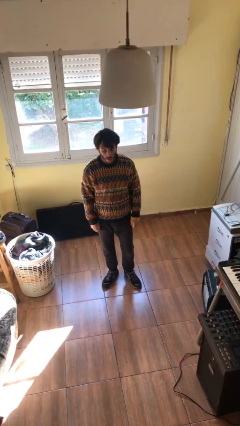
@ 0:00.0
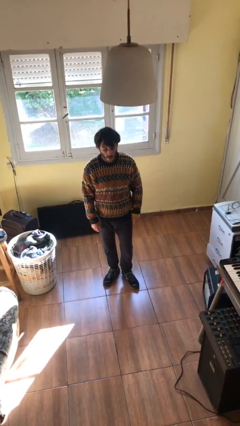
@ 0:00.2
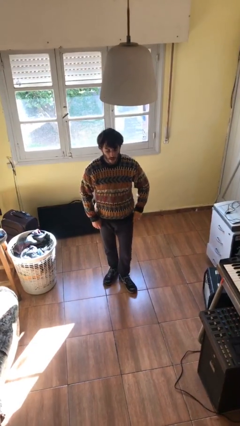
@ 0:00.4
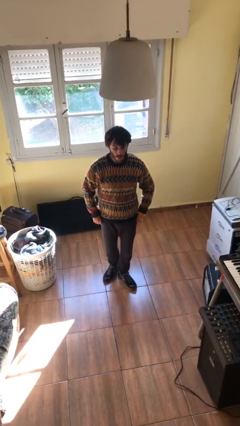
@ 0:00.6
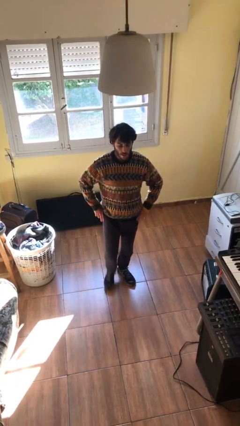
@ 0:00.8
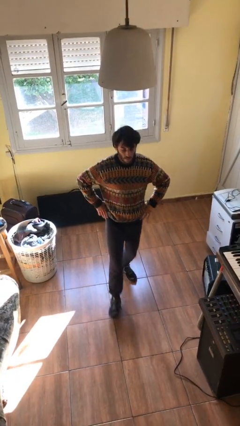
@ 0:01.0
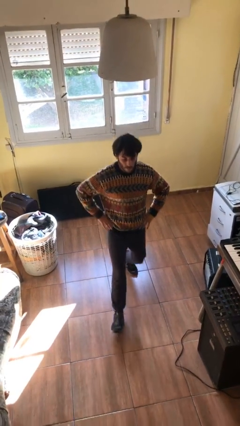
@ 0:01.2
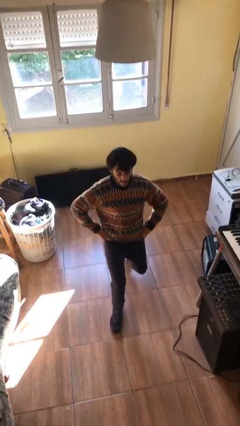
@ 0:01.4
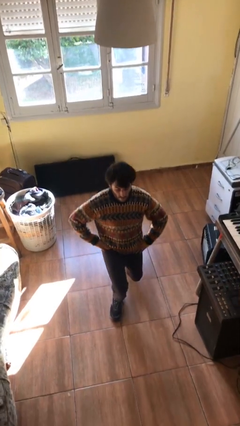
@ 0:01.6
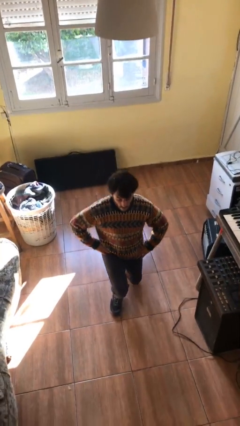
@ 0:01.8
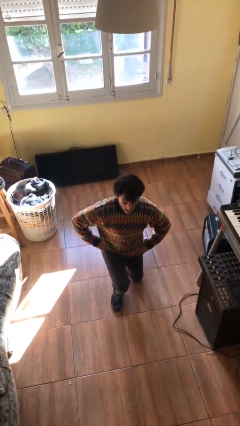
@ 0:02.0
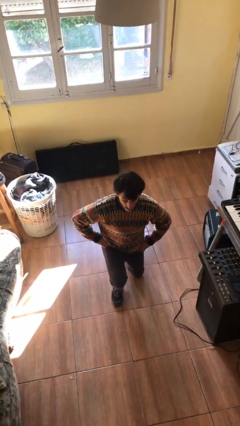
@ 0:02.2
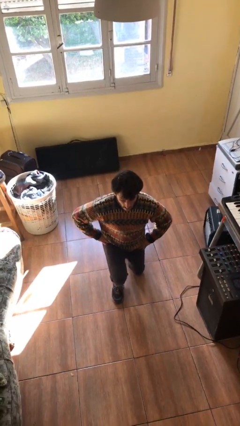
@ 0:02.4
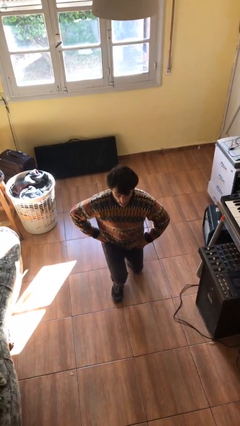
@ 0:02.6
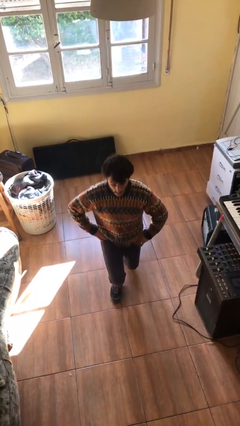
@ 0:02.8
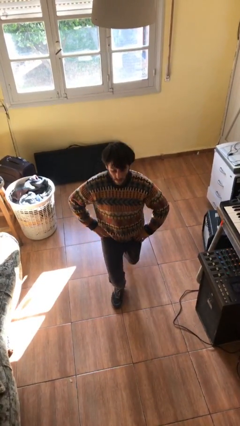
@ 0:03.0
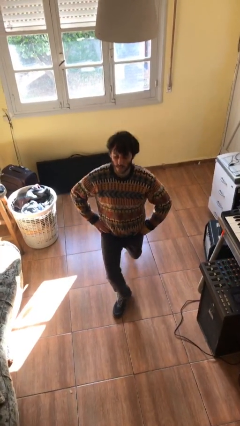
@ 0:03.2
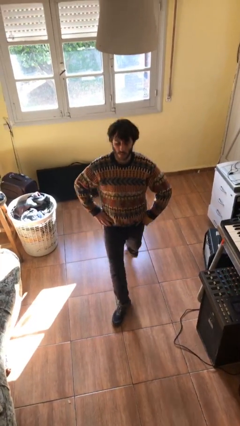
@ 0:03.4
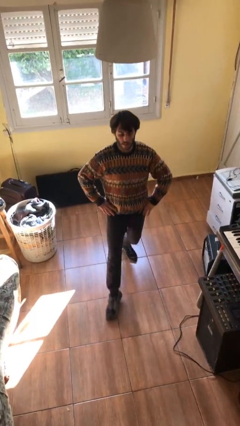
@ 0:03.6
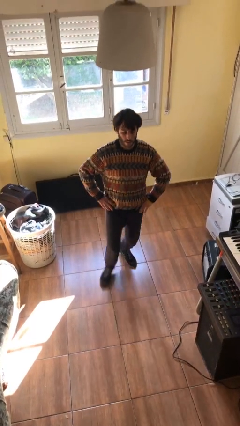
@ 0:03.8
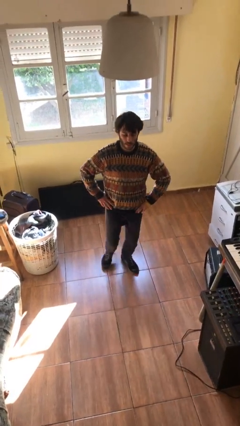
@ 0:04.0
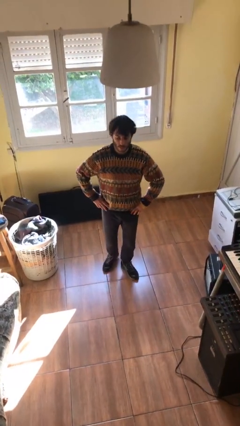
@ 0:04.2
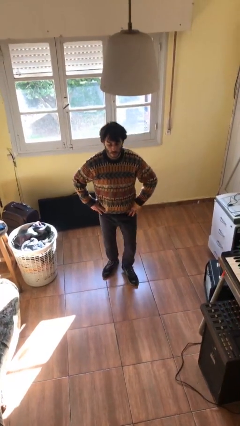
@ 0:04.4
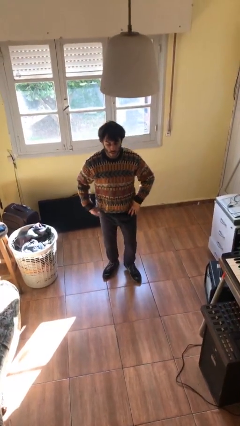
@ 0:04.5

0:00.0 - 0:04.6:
person exercises with lunges

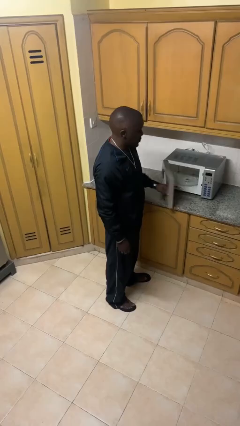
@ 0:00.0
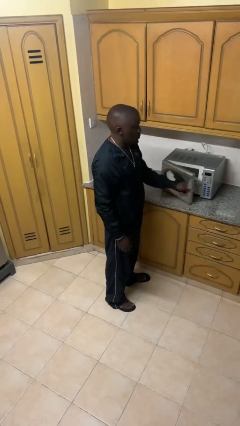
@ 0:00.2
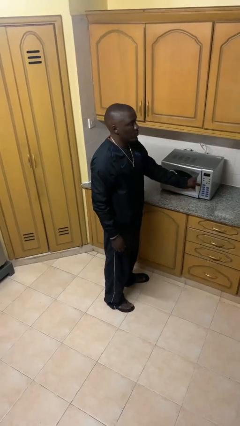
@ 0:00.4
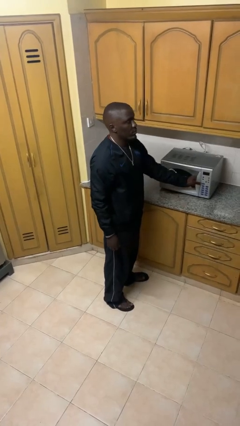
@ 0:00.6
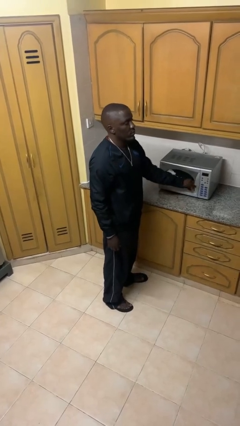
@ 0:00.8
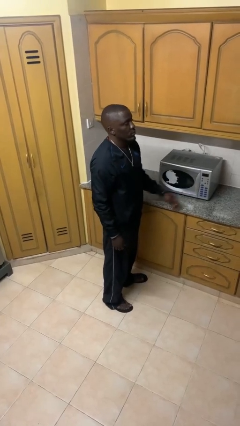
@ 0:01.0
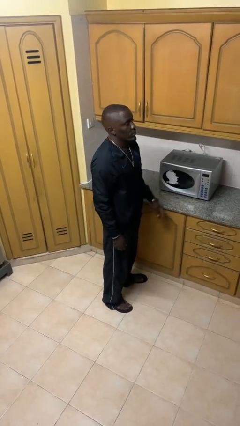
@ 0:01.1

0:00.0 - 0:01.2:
person closes microwave

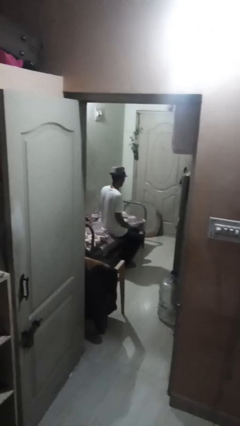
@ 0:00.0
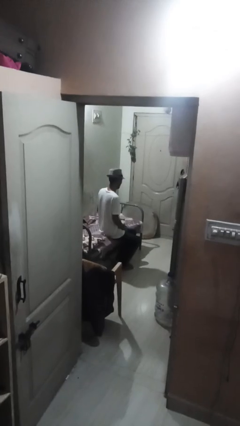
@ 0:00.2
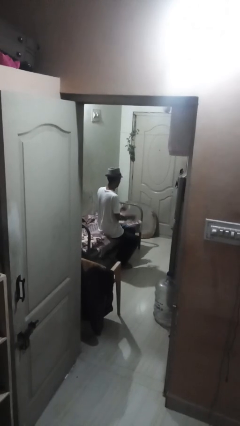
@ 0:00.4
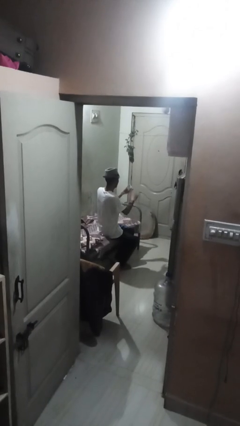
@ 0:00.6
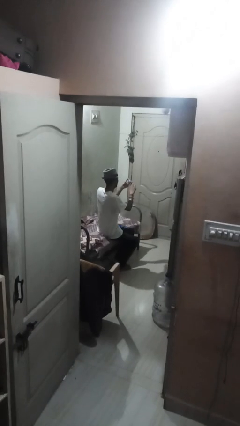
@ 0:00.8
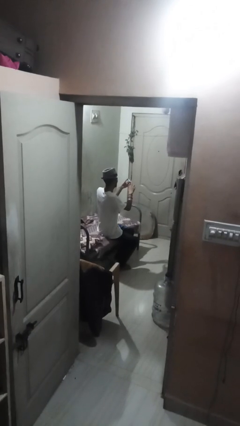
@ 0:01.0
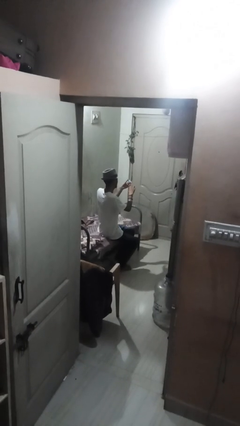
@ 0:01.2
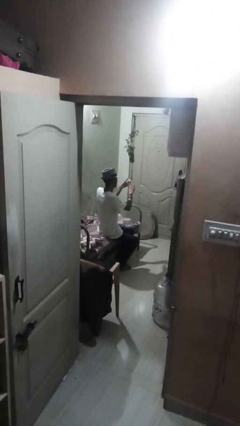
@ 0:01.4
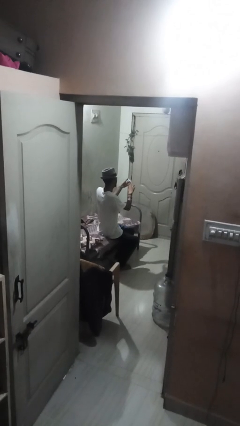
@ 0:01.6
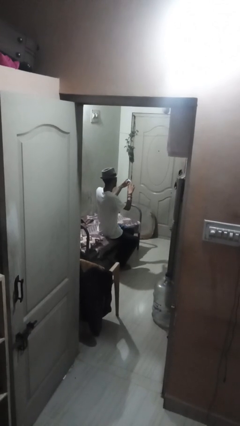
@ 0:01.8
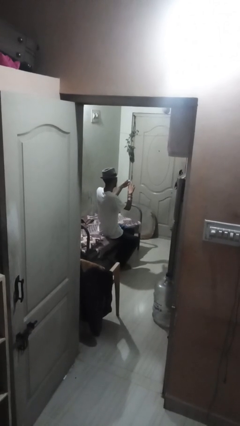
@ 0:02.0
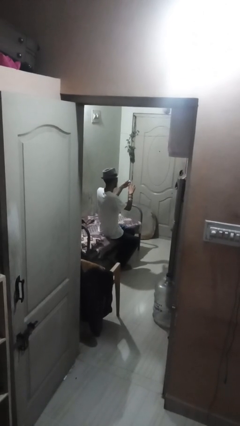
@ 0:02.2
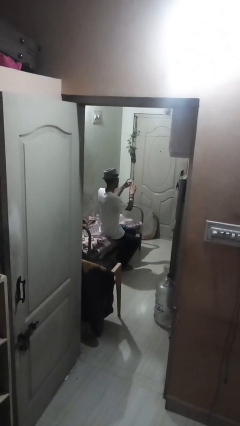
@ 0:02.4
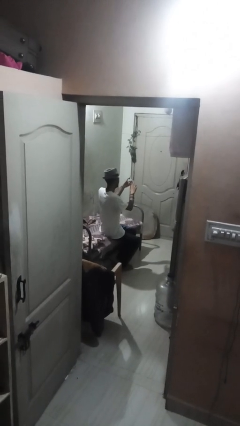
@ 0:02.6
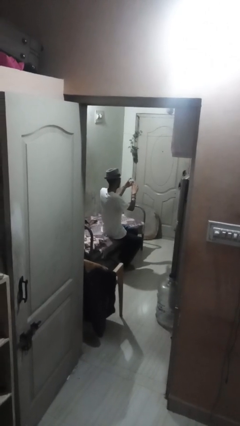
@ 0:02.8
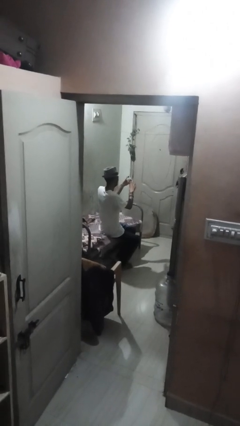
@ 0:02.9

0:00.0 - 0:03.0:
person clips fingernails

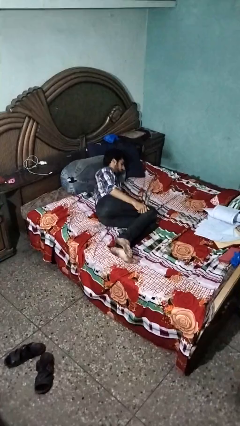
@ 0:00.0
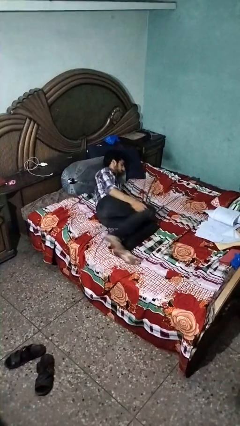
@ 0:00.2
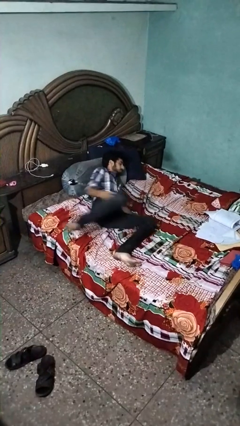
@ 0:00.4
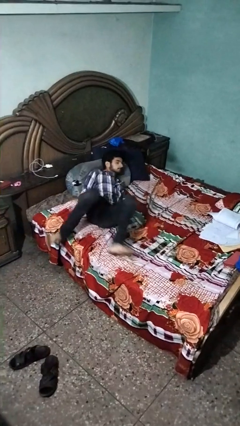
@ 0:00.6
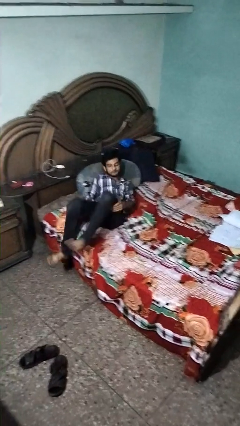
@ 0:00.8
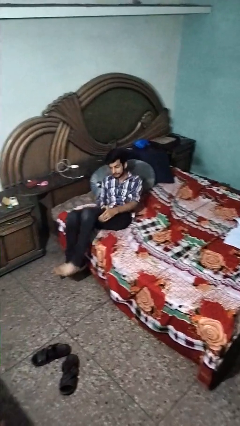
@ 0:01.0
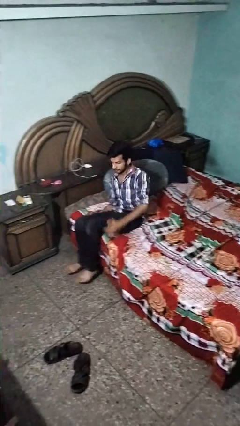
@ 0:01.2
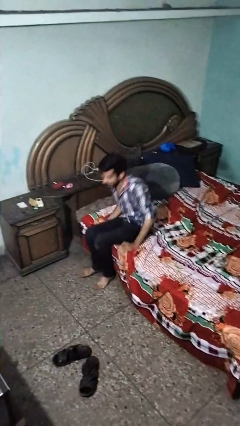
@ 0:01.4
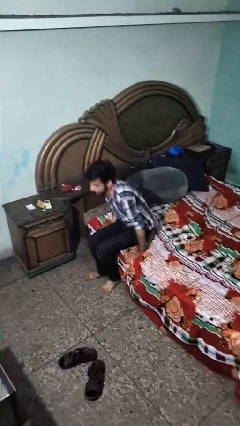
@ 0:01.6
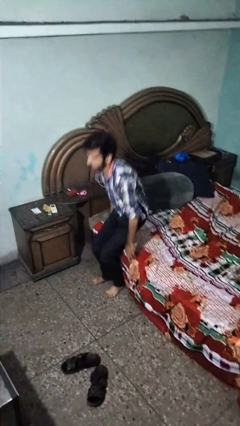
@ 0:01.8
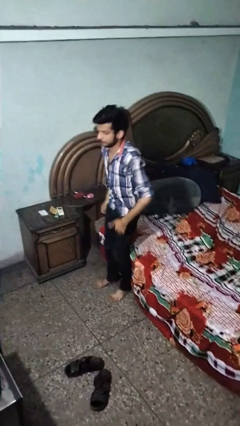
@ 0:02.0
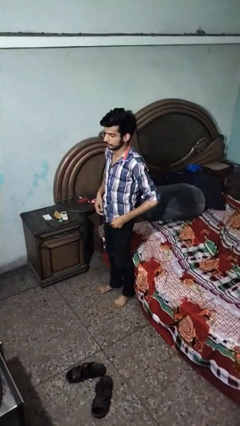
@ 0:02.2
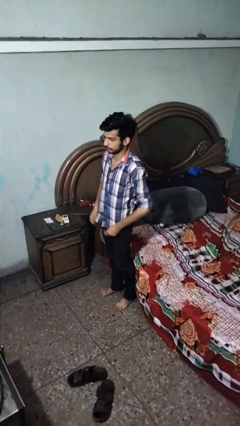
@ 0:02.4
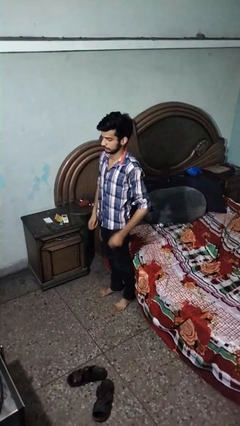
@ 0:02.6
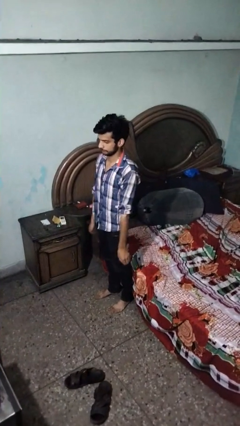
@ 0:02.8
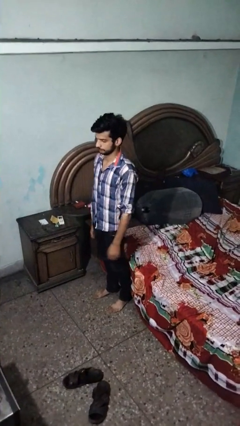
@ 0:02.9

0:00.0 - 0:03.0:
person stands up

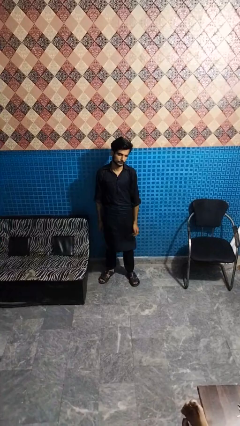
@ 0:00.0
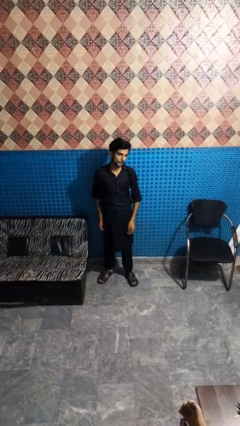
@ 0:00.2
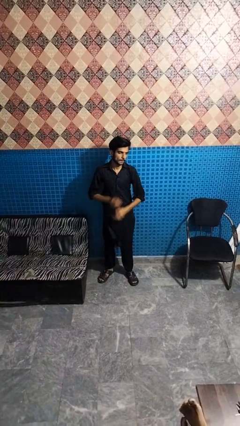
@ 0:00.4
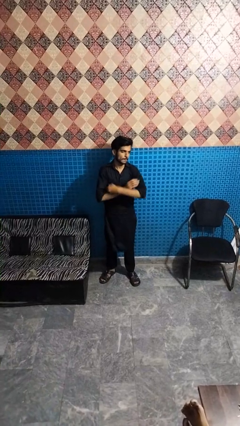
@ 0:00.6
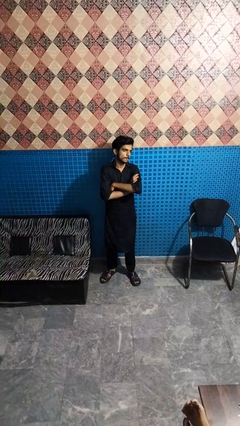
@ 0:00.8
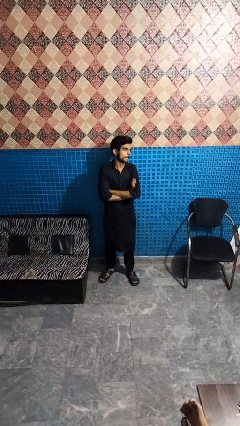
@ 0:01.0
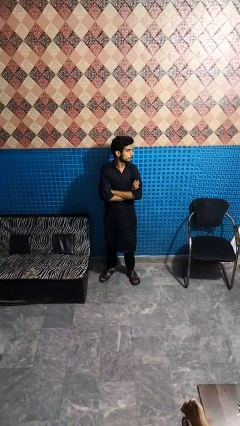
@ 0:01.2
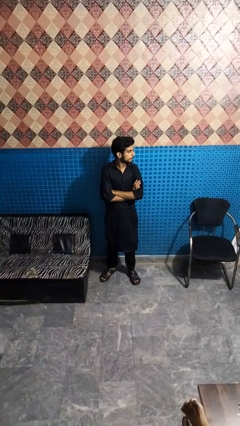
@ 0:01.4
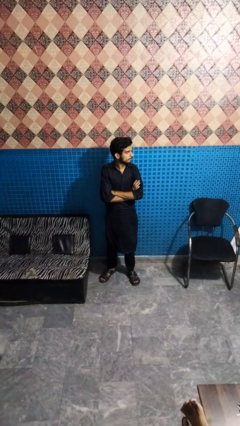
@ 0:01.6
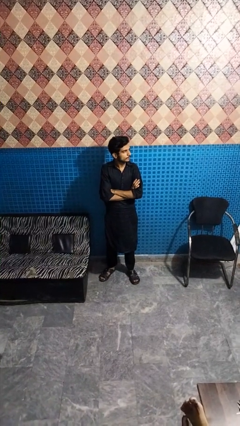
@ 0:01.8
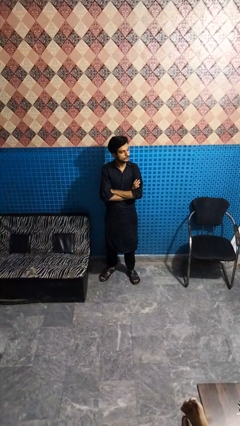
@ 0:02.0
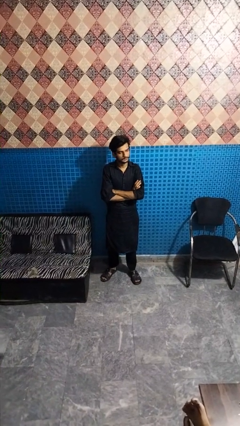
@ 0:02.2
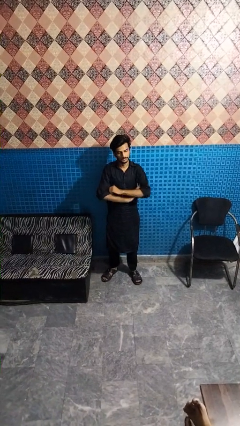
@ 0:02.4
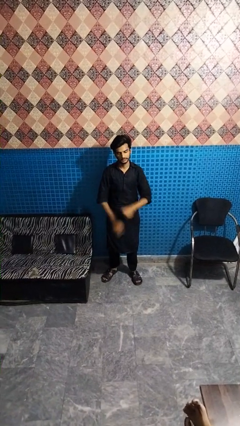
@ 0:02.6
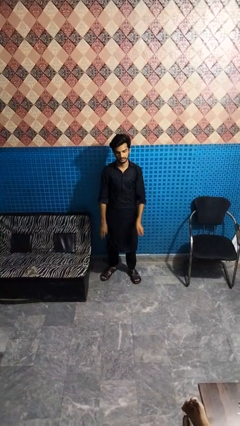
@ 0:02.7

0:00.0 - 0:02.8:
person crosses arms

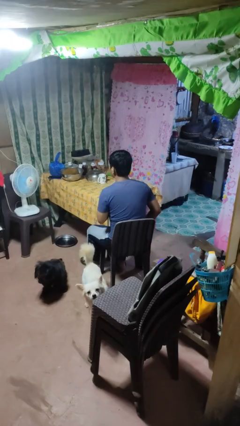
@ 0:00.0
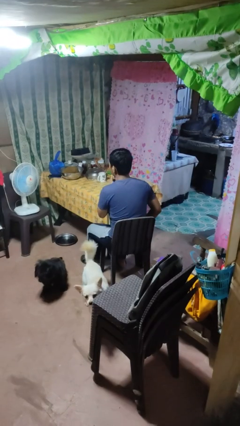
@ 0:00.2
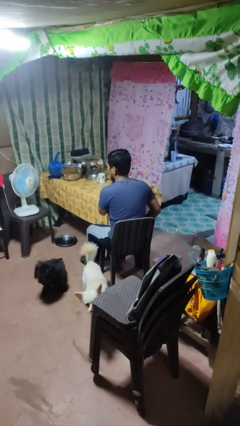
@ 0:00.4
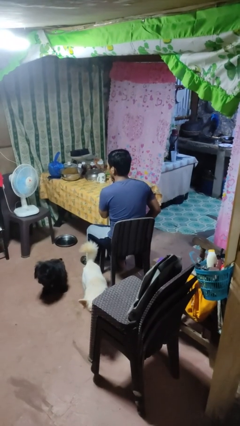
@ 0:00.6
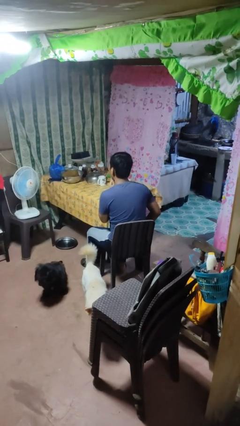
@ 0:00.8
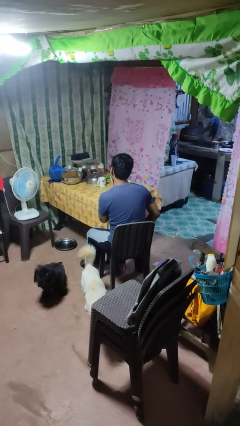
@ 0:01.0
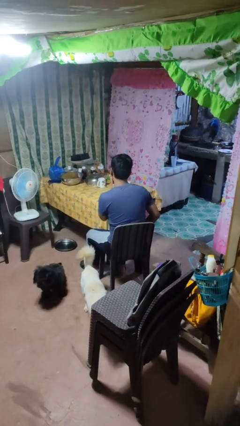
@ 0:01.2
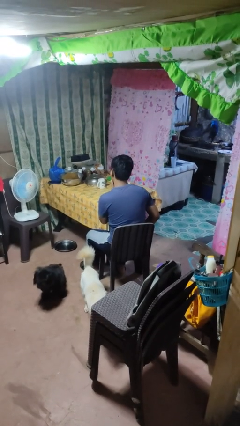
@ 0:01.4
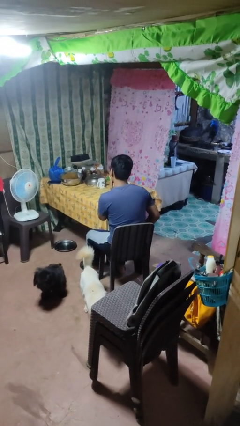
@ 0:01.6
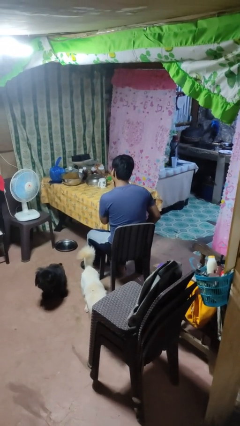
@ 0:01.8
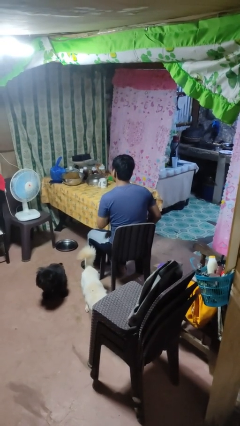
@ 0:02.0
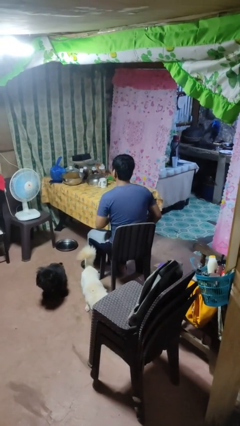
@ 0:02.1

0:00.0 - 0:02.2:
person strokes chin

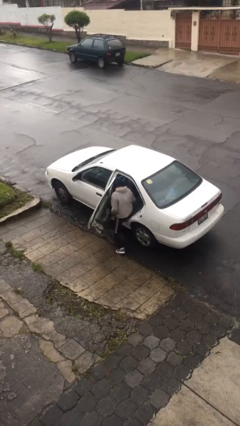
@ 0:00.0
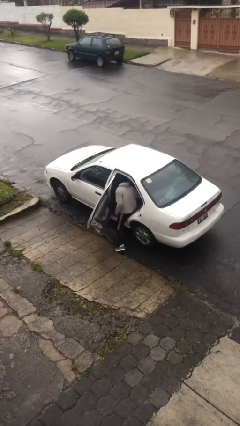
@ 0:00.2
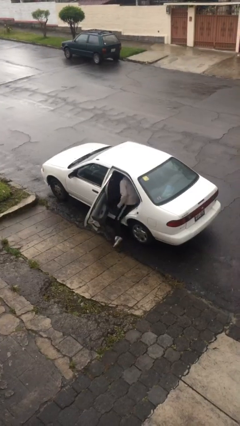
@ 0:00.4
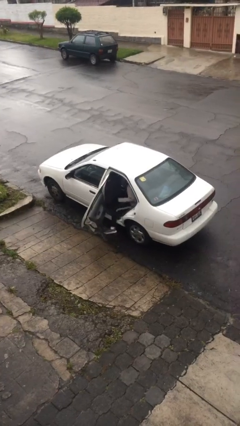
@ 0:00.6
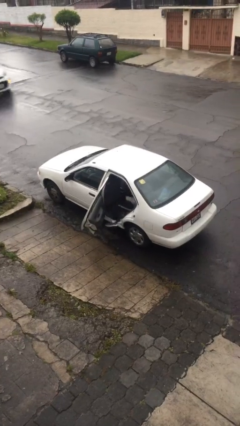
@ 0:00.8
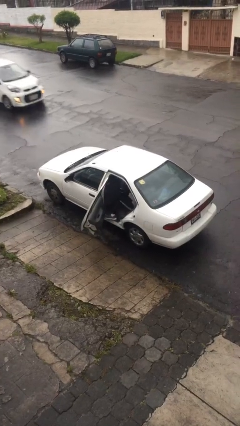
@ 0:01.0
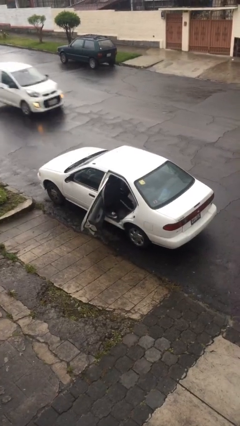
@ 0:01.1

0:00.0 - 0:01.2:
person enters car
